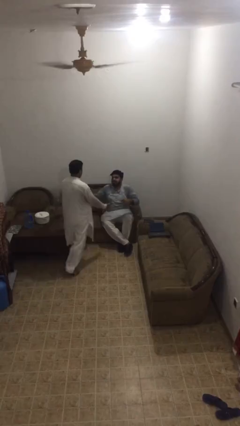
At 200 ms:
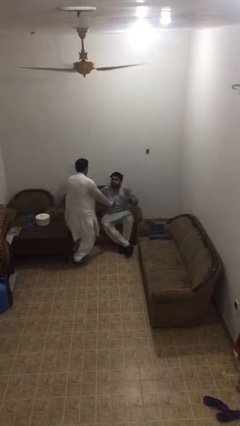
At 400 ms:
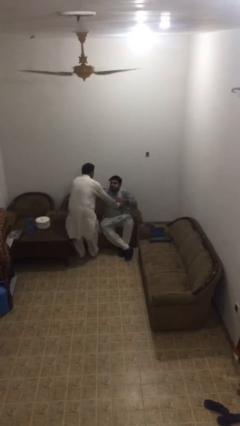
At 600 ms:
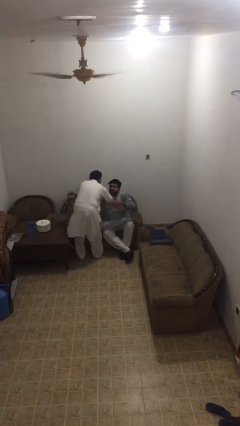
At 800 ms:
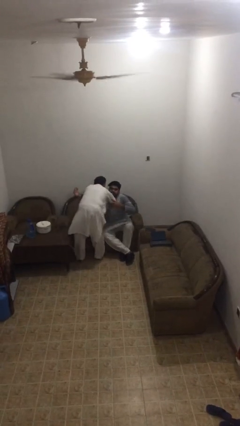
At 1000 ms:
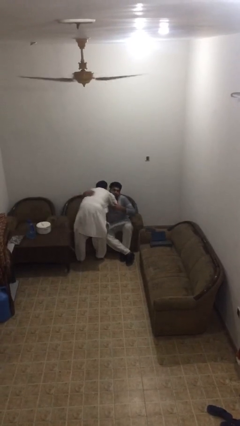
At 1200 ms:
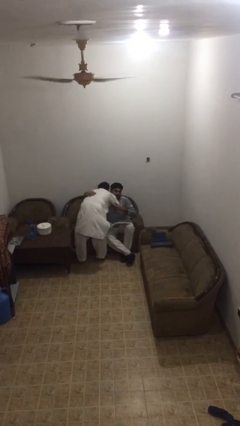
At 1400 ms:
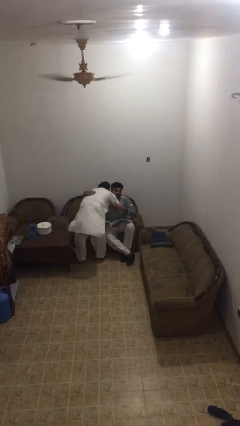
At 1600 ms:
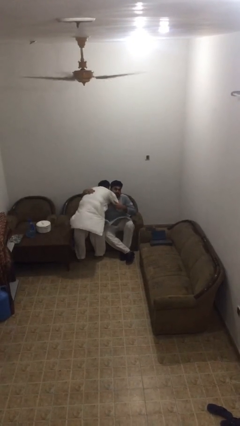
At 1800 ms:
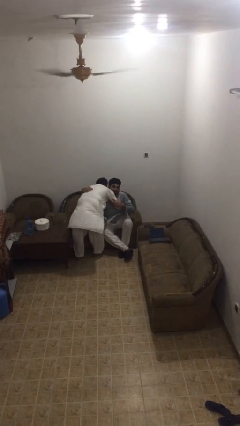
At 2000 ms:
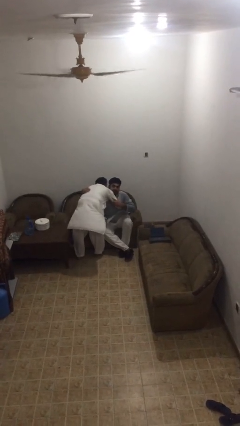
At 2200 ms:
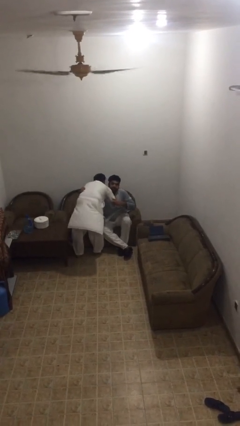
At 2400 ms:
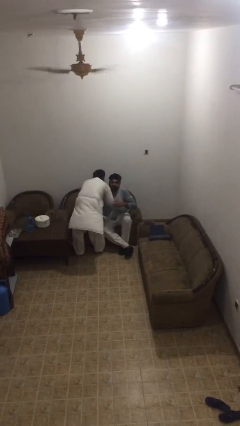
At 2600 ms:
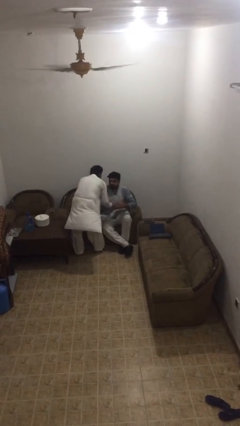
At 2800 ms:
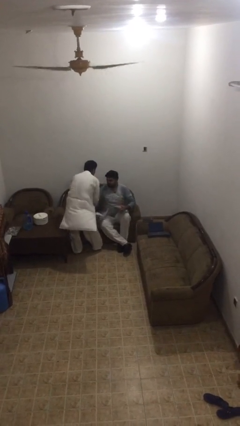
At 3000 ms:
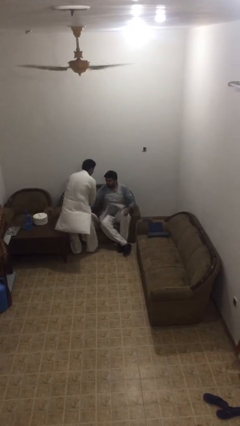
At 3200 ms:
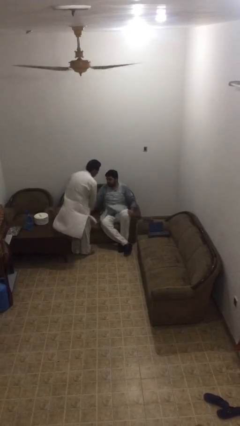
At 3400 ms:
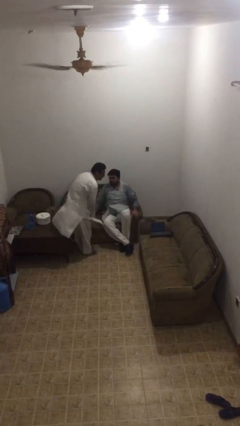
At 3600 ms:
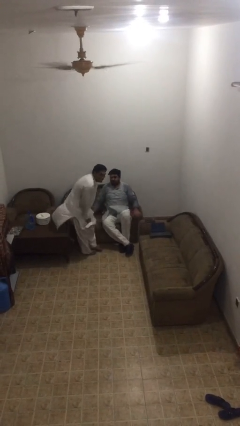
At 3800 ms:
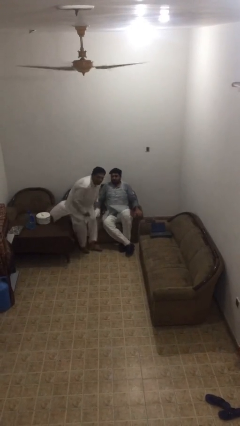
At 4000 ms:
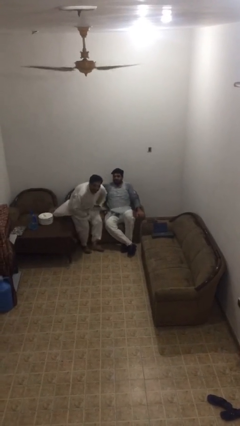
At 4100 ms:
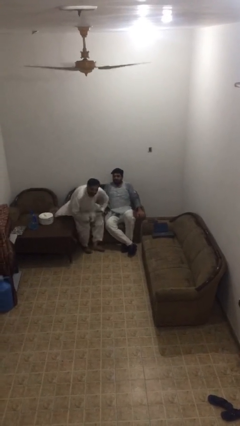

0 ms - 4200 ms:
person embraces person

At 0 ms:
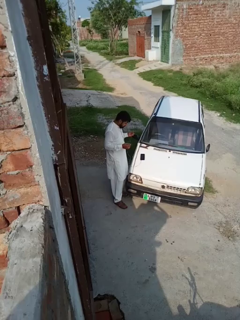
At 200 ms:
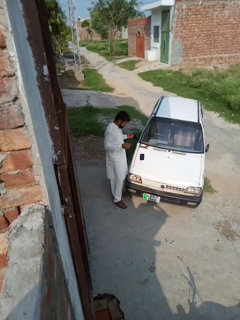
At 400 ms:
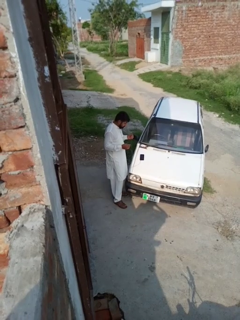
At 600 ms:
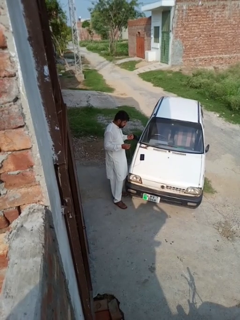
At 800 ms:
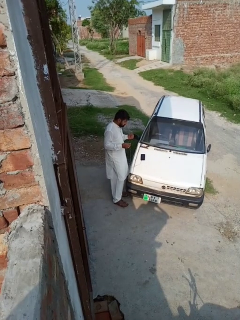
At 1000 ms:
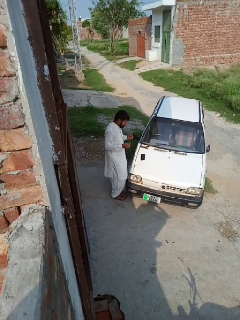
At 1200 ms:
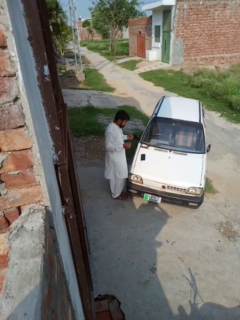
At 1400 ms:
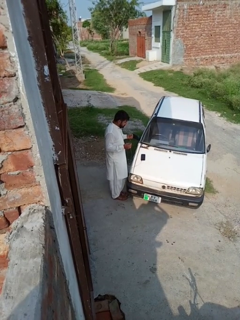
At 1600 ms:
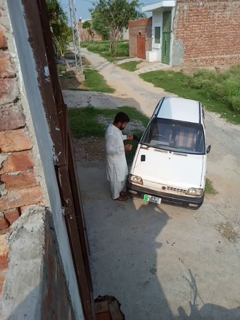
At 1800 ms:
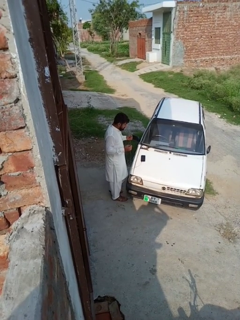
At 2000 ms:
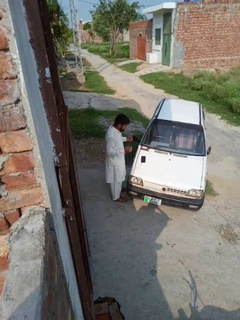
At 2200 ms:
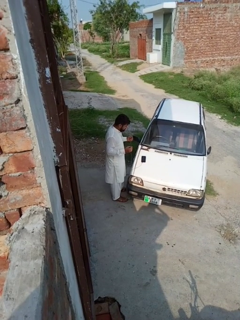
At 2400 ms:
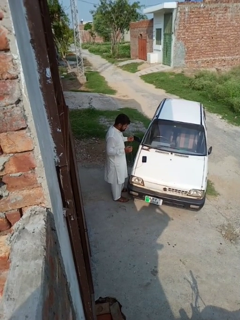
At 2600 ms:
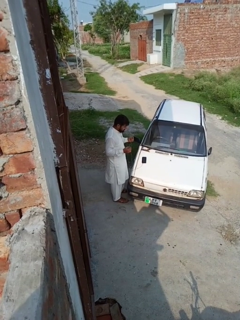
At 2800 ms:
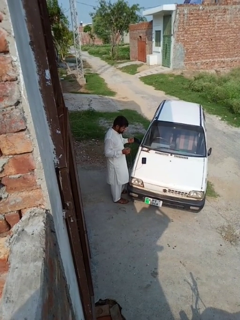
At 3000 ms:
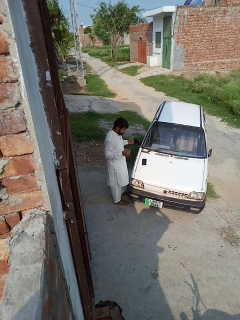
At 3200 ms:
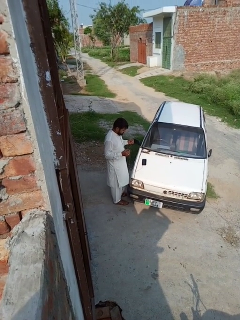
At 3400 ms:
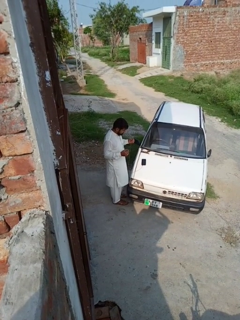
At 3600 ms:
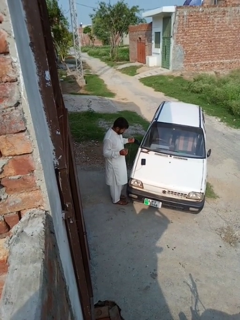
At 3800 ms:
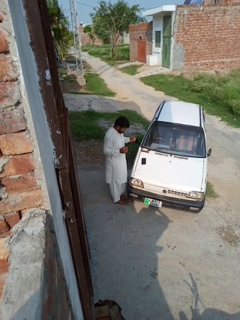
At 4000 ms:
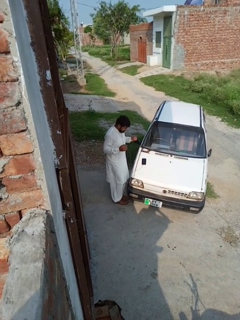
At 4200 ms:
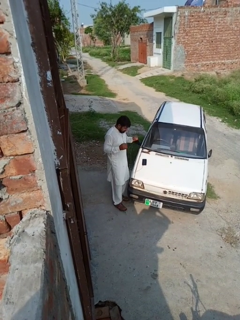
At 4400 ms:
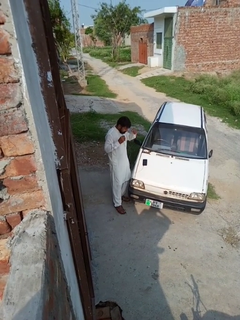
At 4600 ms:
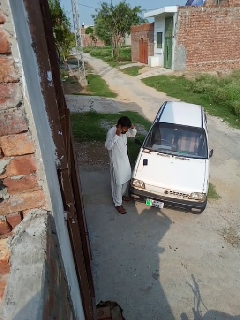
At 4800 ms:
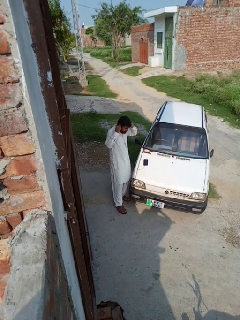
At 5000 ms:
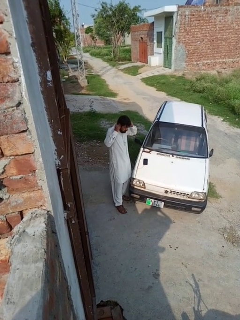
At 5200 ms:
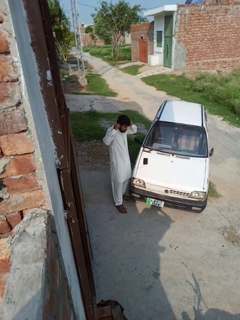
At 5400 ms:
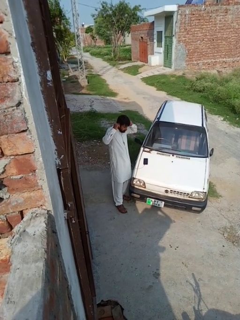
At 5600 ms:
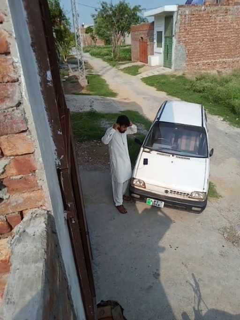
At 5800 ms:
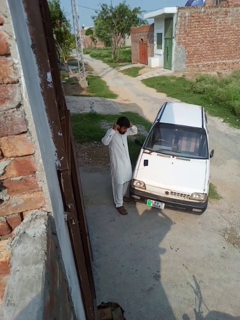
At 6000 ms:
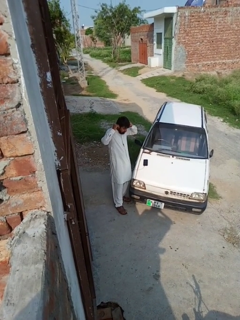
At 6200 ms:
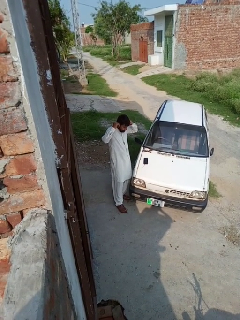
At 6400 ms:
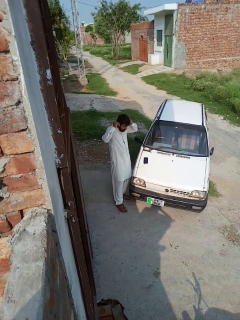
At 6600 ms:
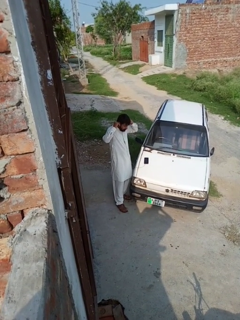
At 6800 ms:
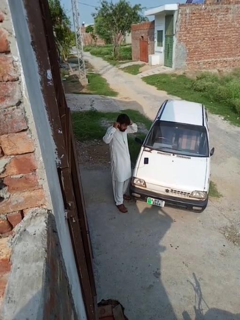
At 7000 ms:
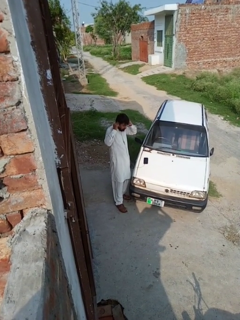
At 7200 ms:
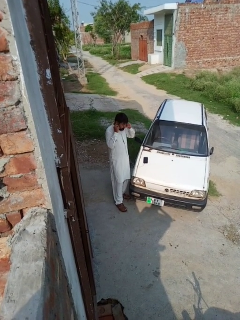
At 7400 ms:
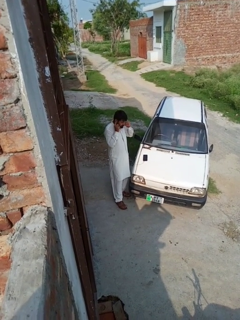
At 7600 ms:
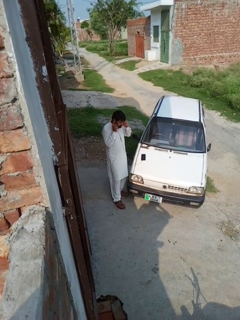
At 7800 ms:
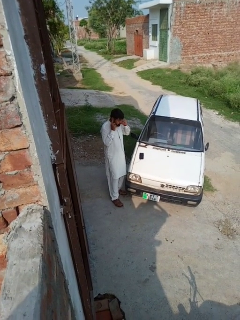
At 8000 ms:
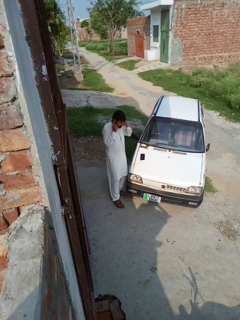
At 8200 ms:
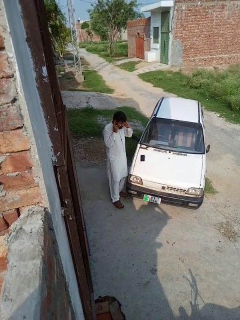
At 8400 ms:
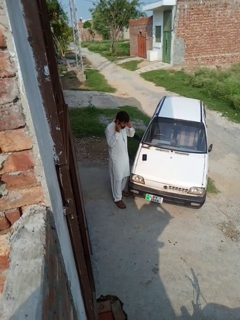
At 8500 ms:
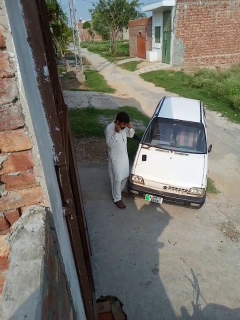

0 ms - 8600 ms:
person puts on headphones

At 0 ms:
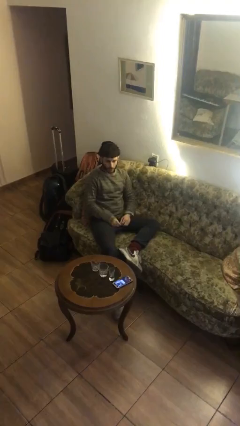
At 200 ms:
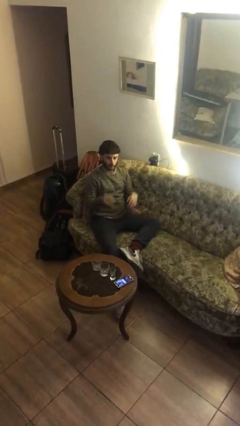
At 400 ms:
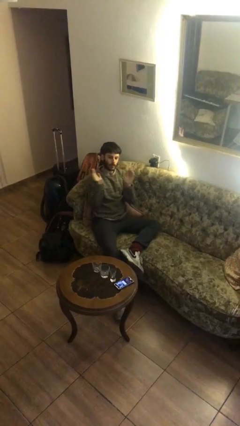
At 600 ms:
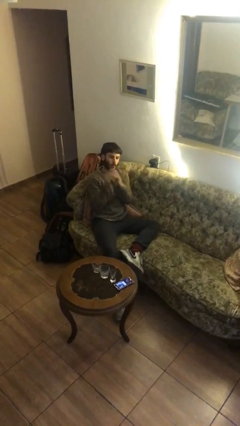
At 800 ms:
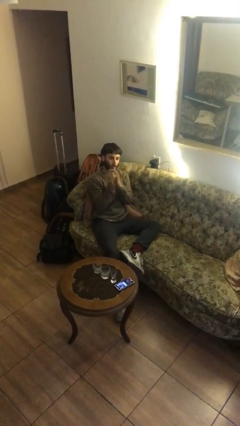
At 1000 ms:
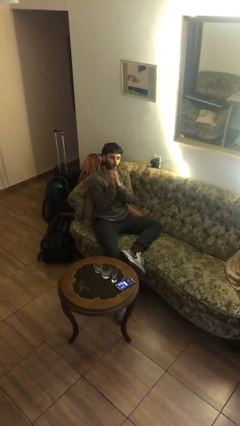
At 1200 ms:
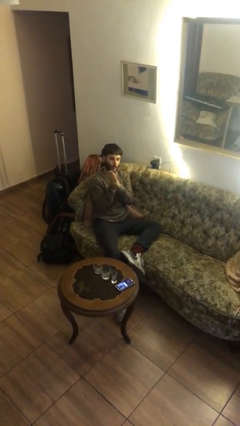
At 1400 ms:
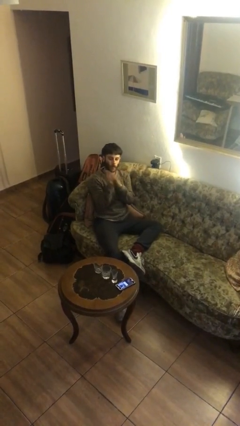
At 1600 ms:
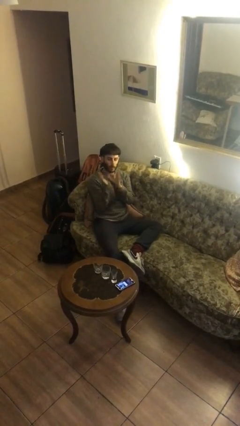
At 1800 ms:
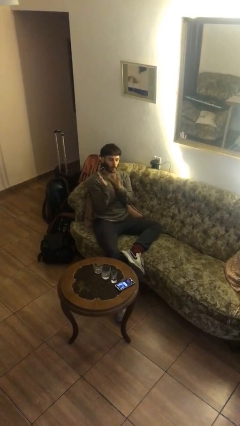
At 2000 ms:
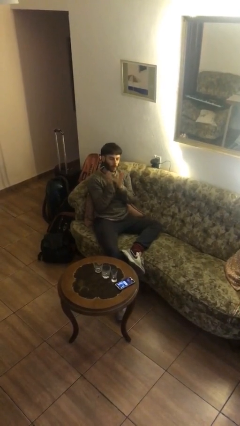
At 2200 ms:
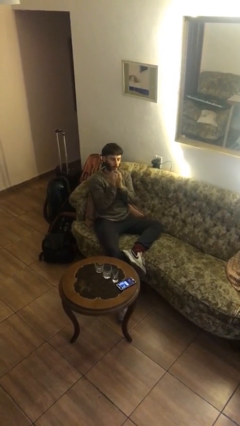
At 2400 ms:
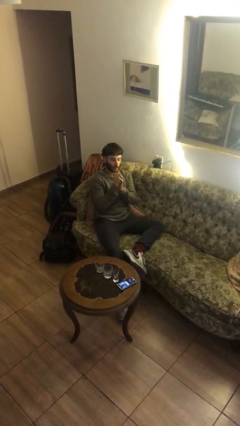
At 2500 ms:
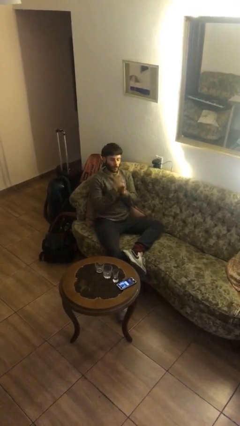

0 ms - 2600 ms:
person claps hands

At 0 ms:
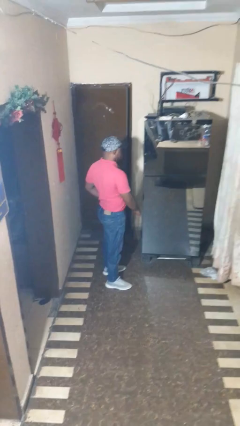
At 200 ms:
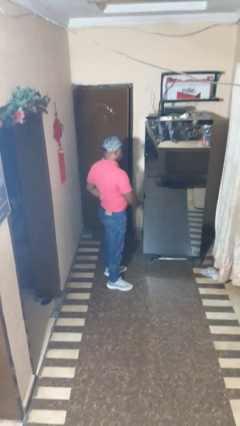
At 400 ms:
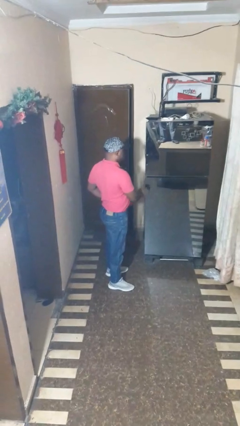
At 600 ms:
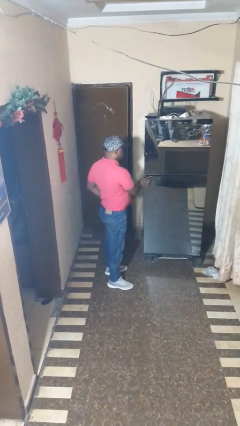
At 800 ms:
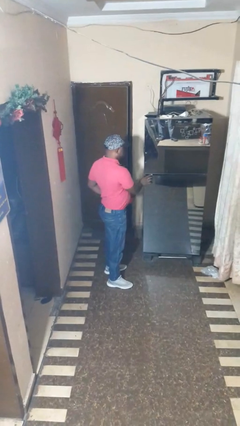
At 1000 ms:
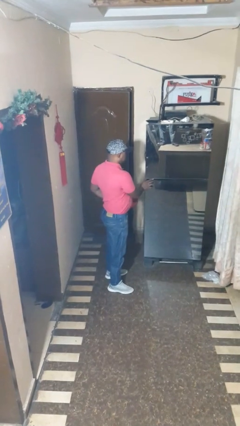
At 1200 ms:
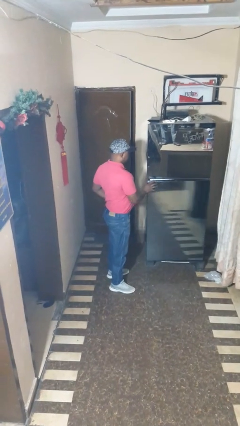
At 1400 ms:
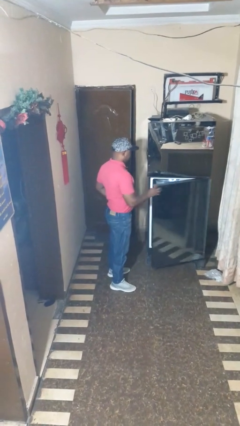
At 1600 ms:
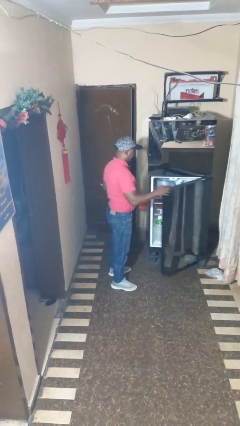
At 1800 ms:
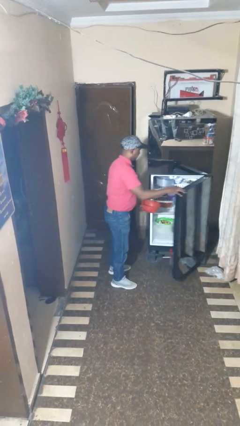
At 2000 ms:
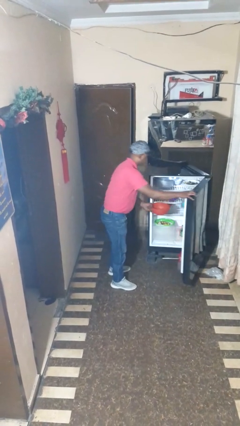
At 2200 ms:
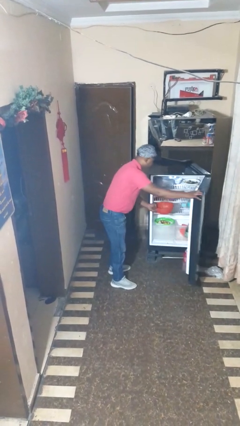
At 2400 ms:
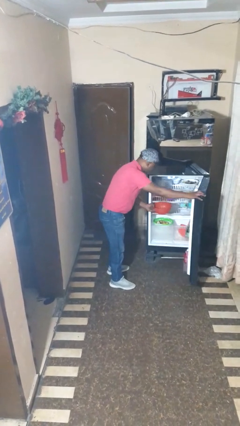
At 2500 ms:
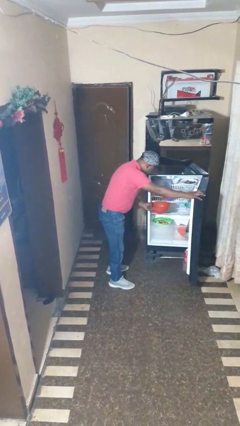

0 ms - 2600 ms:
person opens refrigerator

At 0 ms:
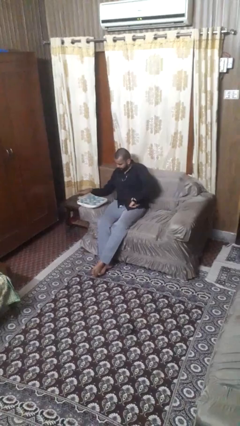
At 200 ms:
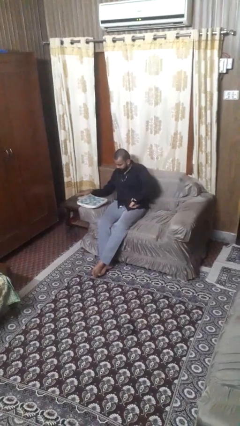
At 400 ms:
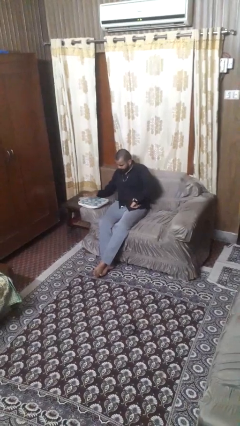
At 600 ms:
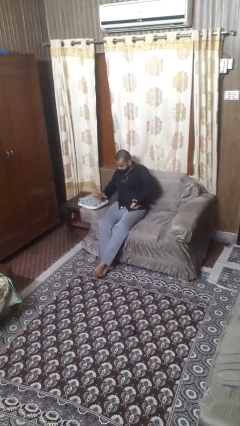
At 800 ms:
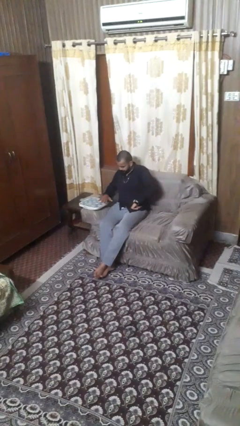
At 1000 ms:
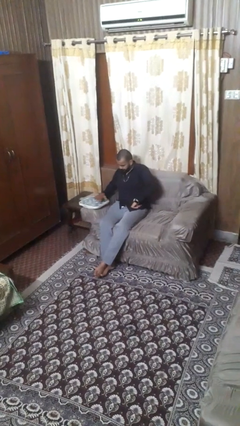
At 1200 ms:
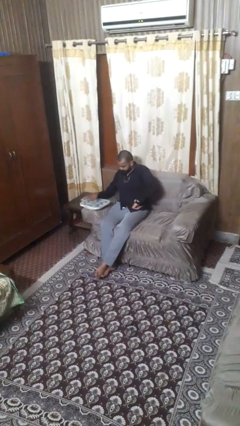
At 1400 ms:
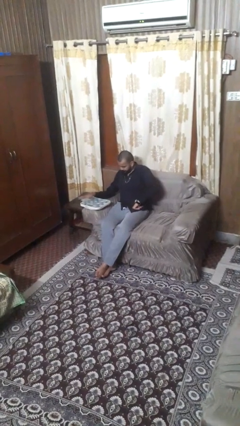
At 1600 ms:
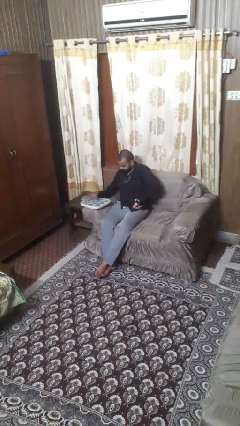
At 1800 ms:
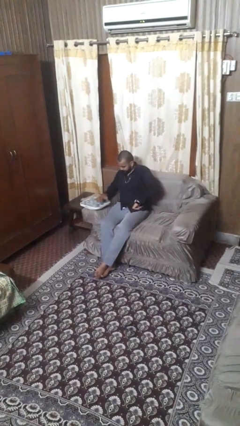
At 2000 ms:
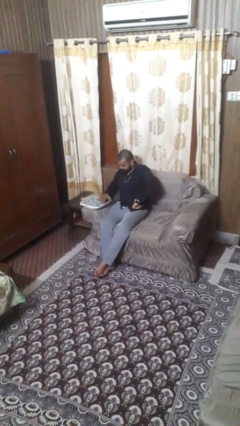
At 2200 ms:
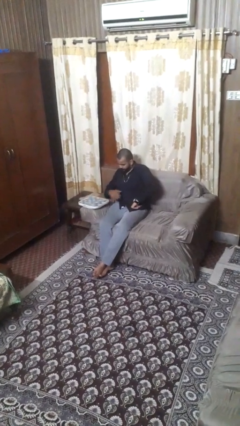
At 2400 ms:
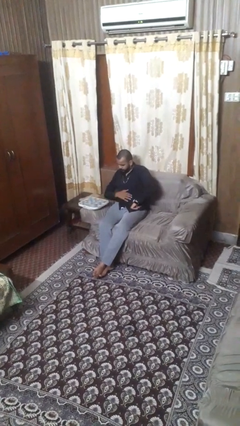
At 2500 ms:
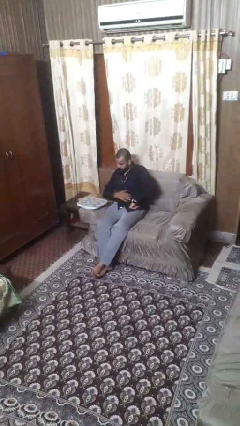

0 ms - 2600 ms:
person waves hand over object
